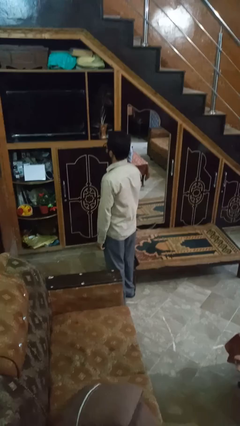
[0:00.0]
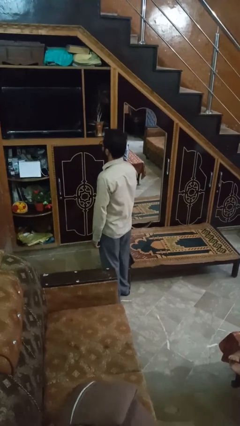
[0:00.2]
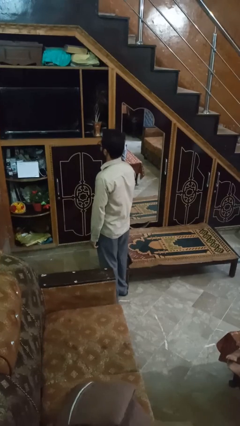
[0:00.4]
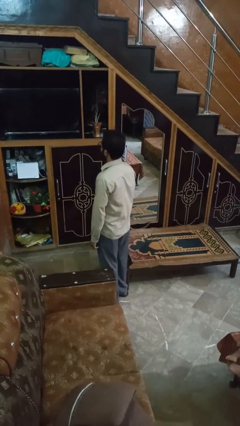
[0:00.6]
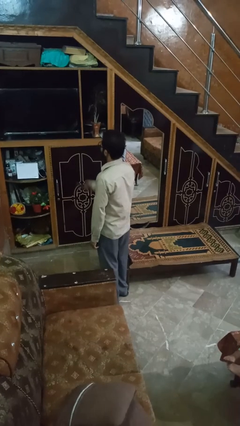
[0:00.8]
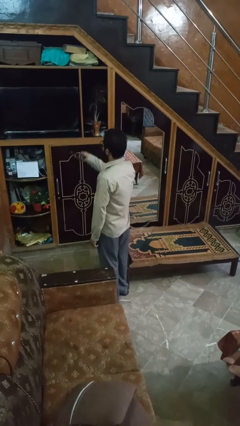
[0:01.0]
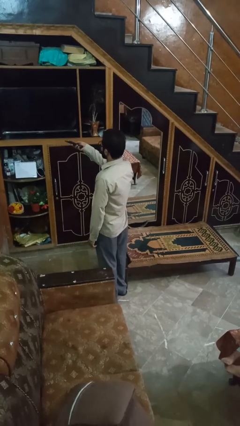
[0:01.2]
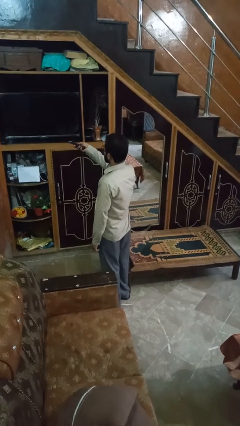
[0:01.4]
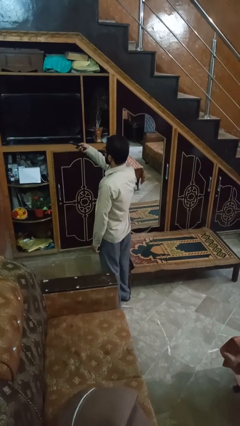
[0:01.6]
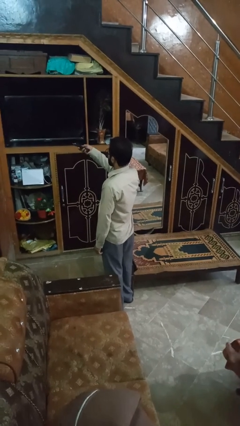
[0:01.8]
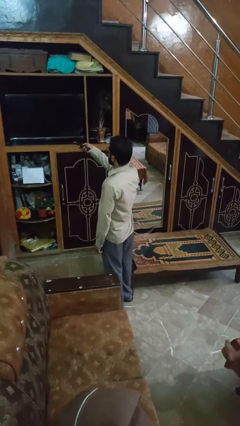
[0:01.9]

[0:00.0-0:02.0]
person uses television remote

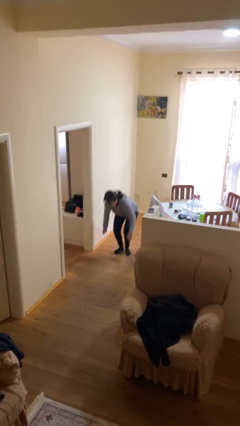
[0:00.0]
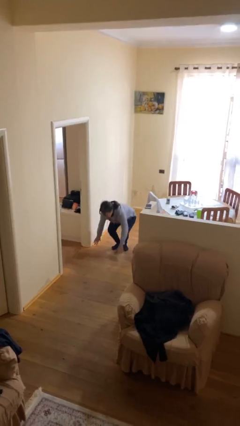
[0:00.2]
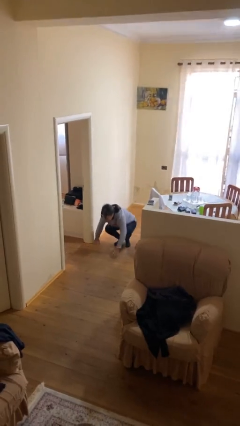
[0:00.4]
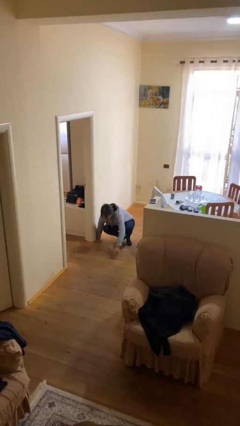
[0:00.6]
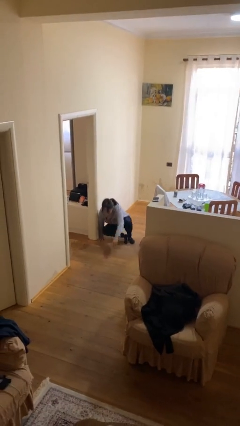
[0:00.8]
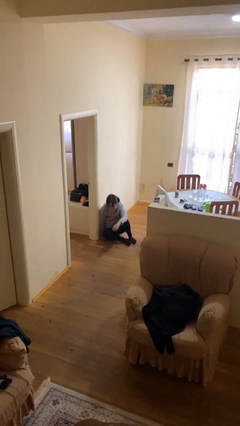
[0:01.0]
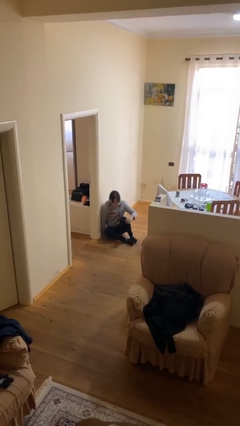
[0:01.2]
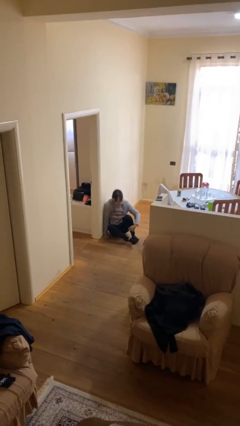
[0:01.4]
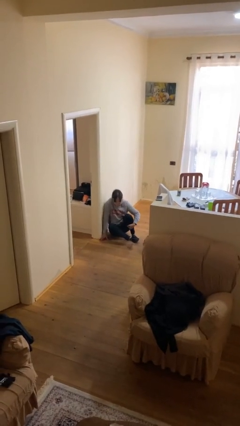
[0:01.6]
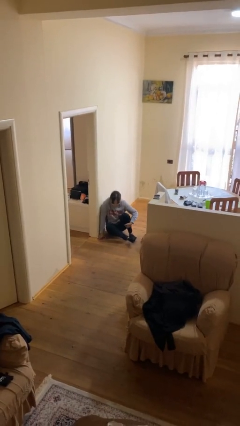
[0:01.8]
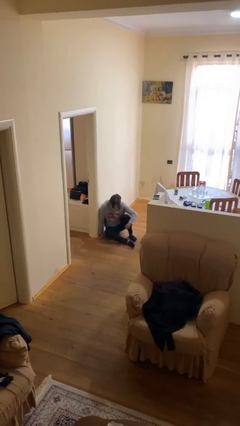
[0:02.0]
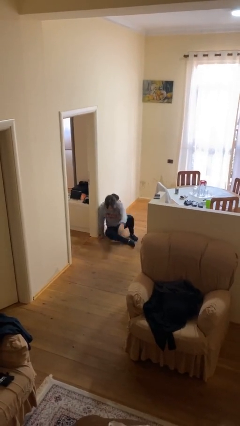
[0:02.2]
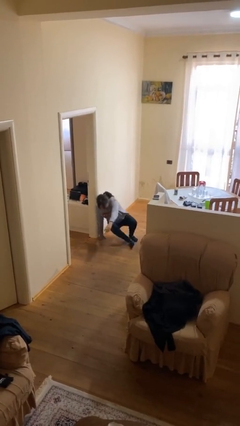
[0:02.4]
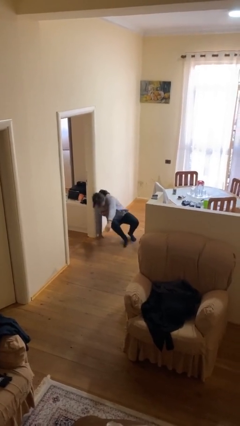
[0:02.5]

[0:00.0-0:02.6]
person sits down

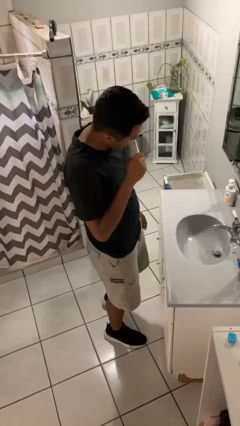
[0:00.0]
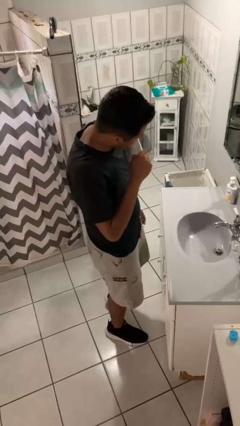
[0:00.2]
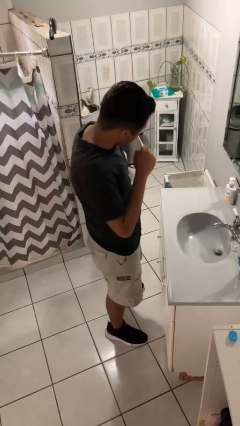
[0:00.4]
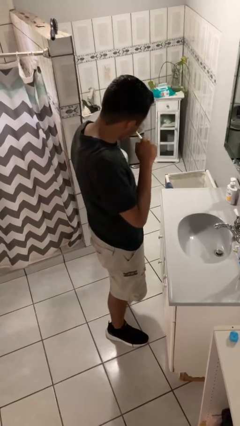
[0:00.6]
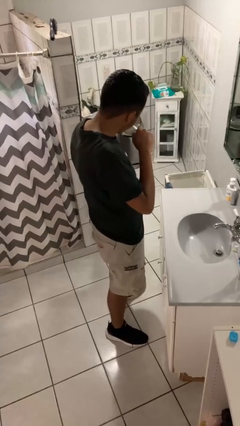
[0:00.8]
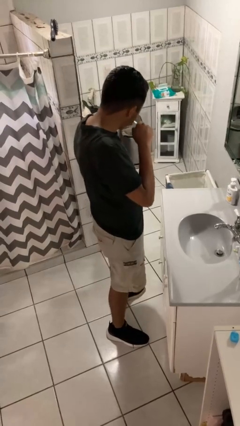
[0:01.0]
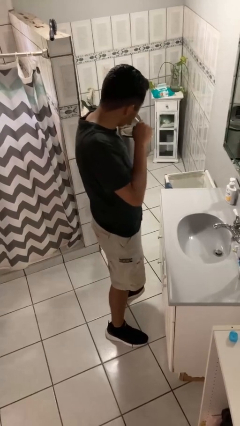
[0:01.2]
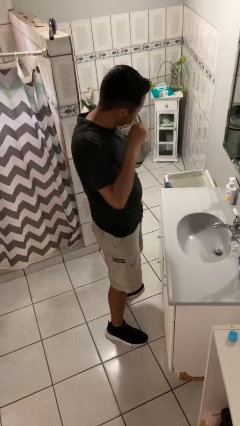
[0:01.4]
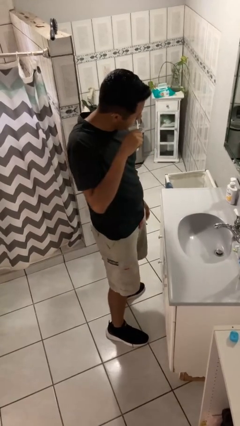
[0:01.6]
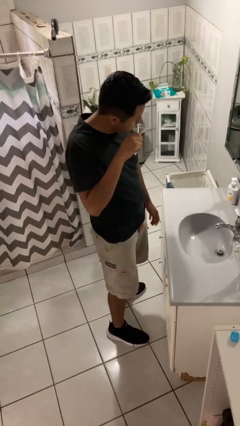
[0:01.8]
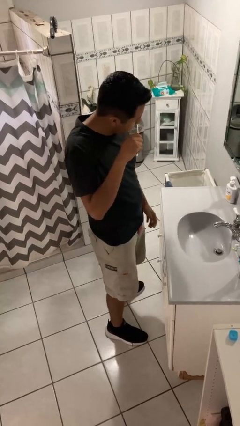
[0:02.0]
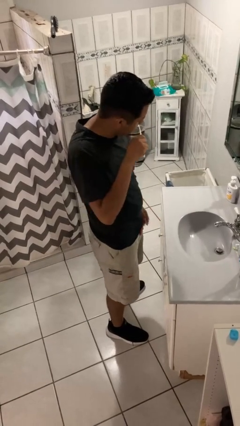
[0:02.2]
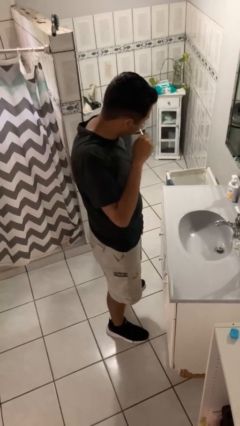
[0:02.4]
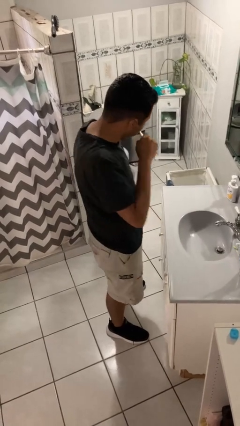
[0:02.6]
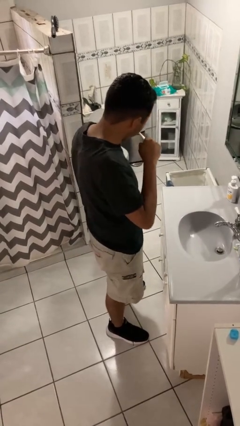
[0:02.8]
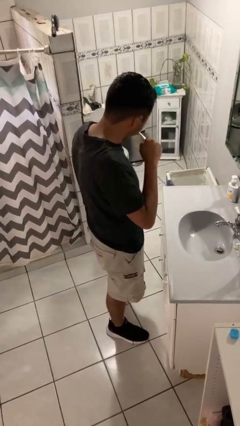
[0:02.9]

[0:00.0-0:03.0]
person brushes teeth

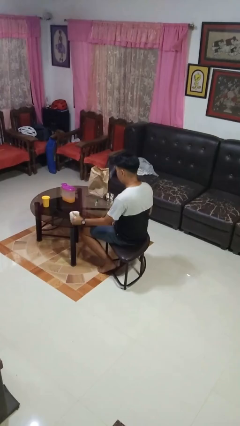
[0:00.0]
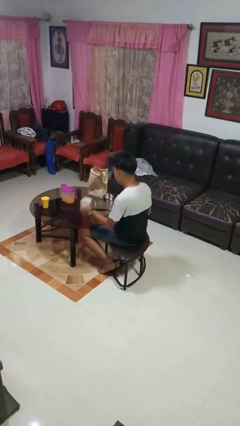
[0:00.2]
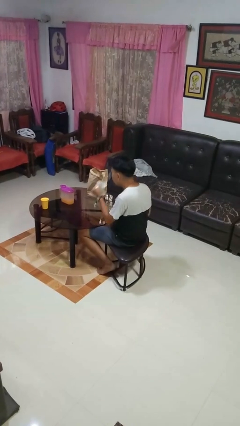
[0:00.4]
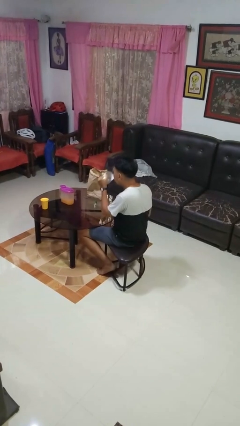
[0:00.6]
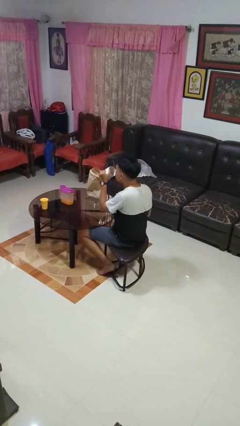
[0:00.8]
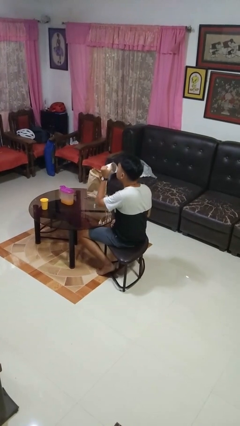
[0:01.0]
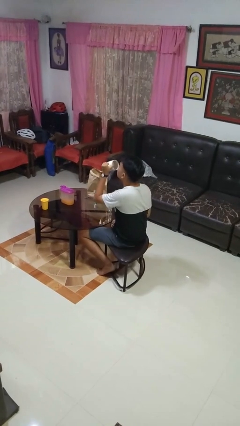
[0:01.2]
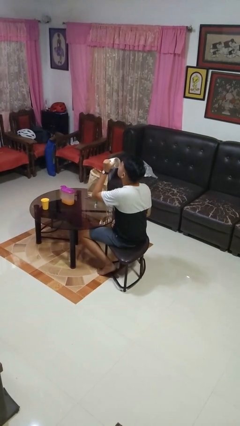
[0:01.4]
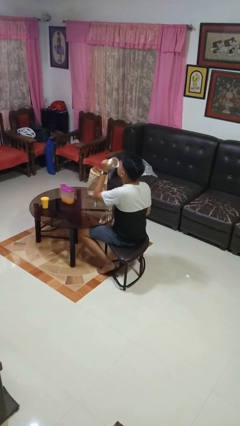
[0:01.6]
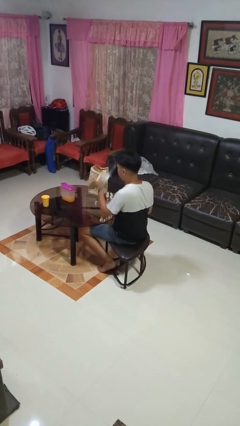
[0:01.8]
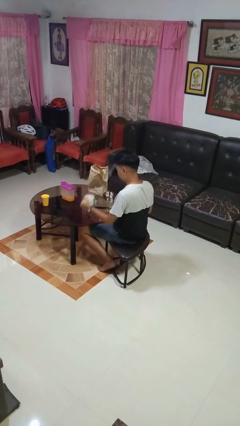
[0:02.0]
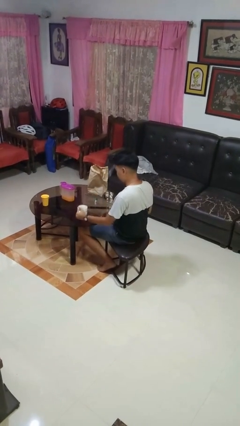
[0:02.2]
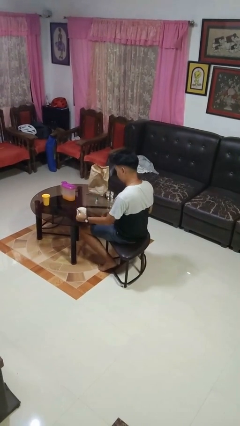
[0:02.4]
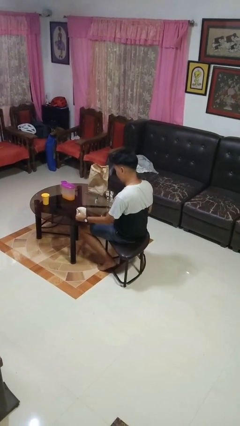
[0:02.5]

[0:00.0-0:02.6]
person drinks from mug

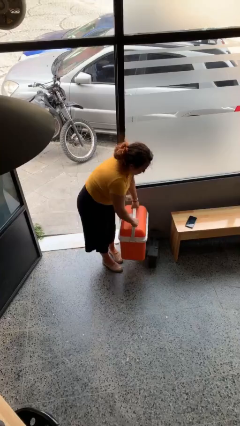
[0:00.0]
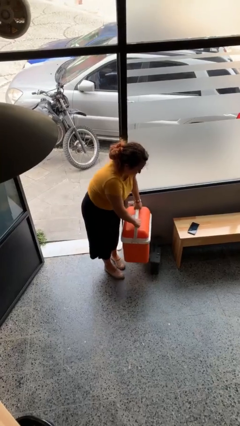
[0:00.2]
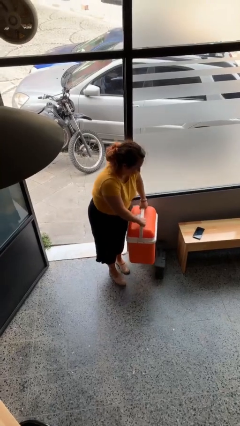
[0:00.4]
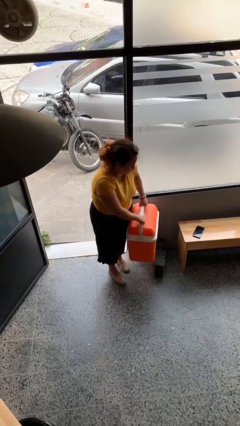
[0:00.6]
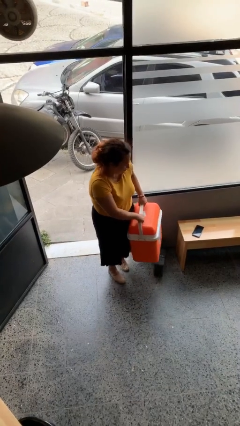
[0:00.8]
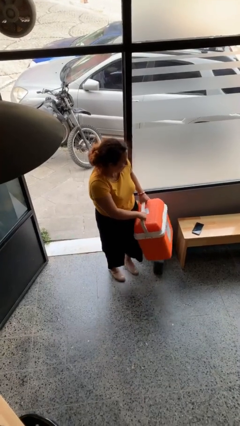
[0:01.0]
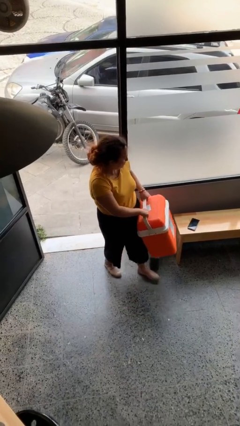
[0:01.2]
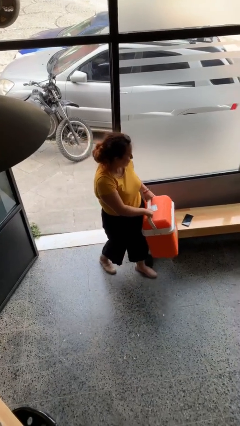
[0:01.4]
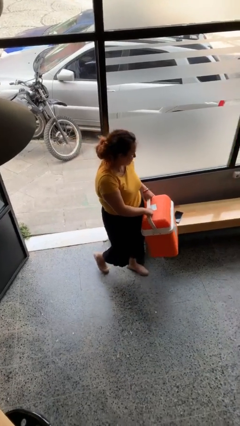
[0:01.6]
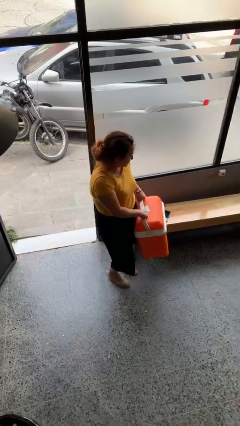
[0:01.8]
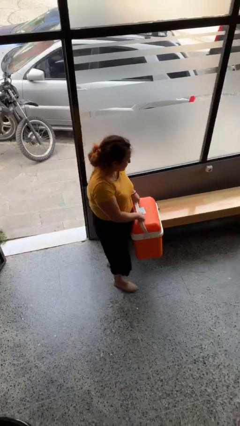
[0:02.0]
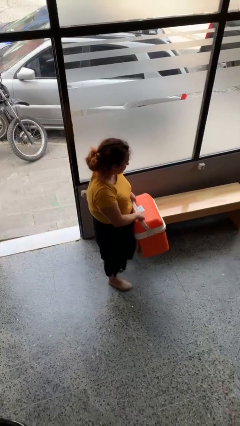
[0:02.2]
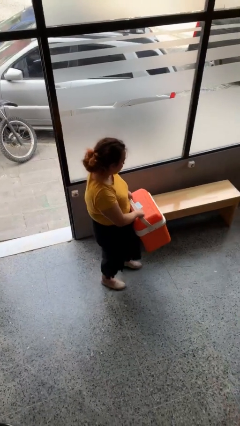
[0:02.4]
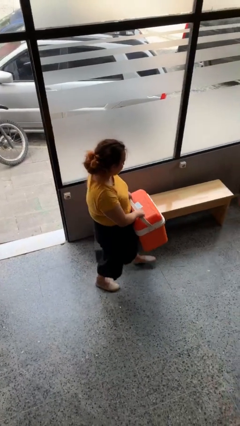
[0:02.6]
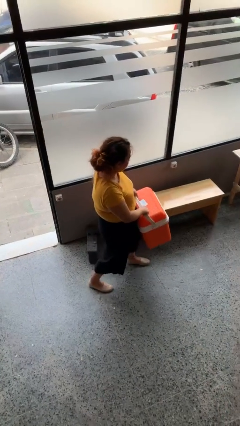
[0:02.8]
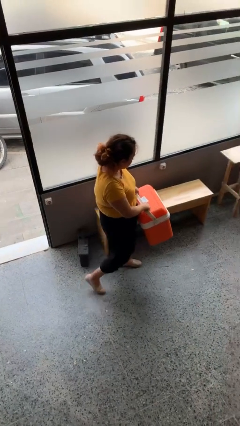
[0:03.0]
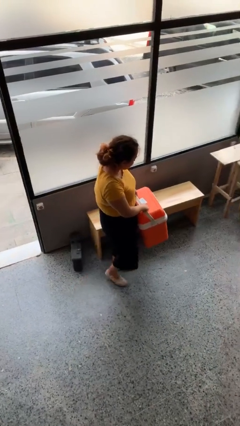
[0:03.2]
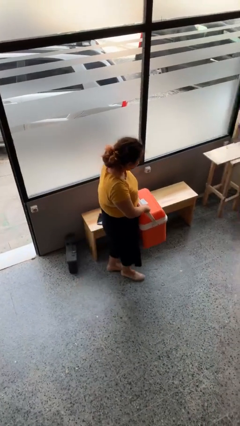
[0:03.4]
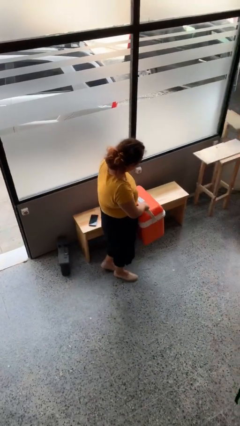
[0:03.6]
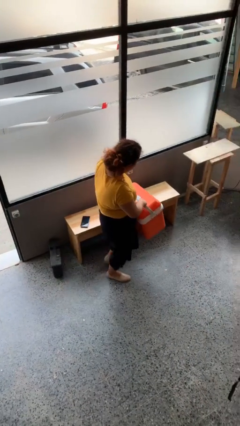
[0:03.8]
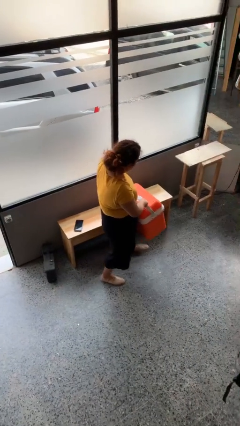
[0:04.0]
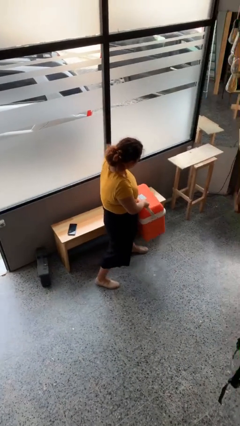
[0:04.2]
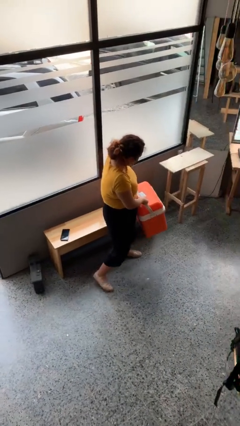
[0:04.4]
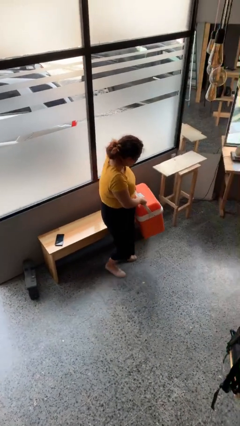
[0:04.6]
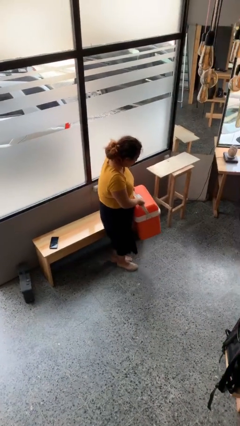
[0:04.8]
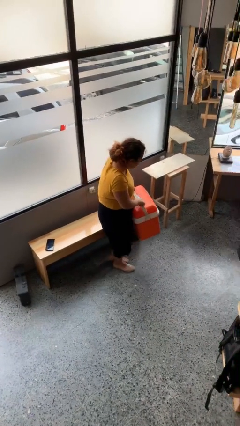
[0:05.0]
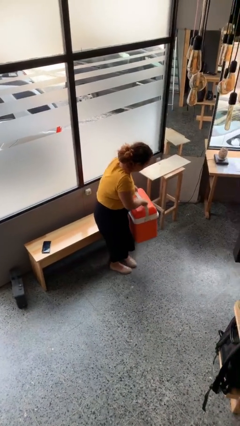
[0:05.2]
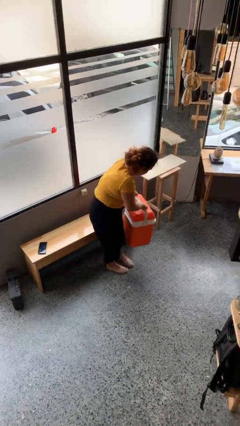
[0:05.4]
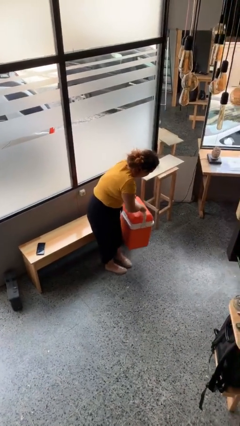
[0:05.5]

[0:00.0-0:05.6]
person carries heavy object

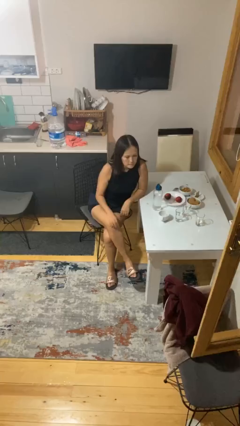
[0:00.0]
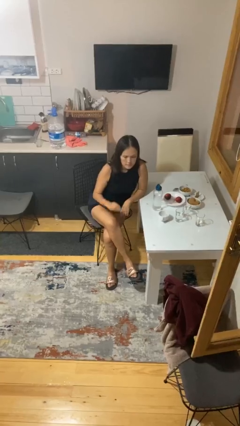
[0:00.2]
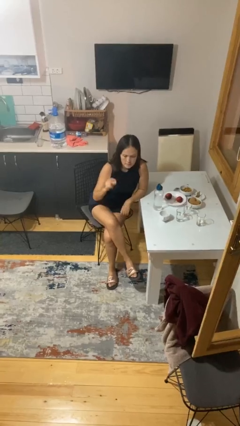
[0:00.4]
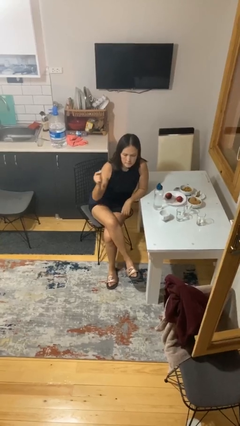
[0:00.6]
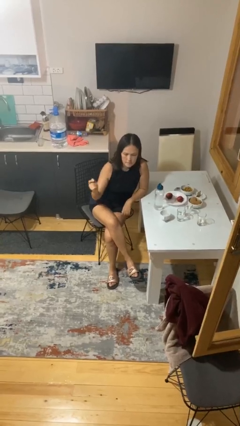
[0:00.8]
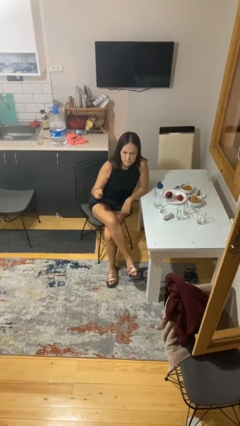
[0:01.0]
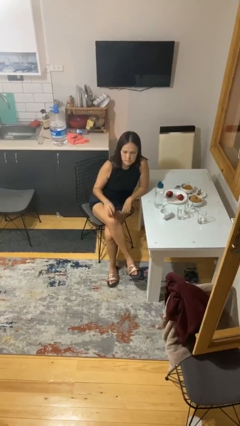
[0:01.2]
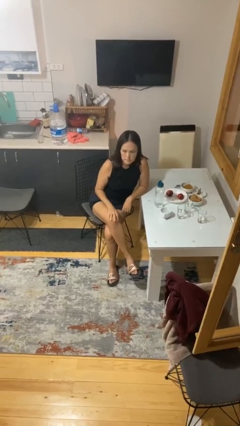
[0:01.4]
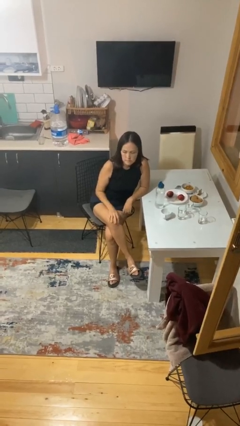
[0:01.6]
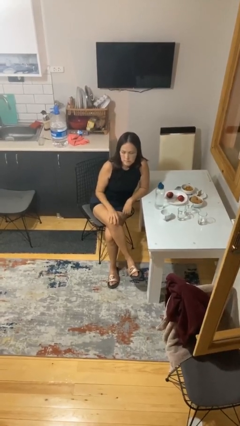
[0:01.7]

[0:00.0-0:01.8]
person snaps fingers
